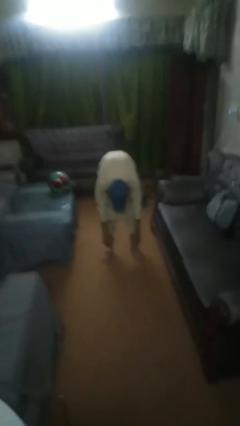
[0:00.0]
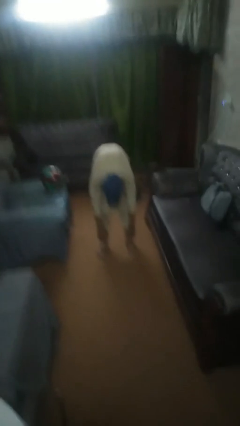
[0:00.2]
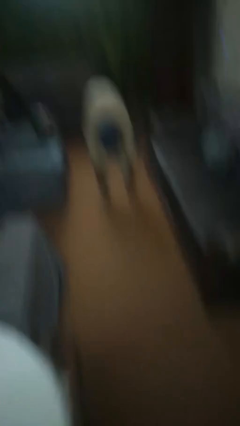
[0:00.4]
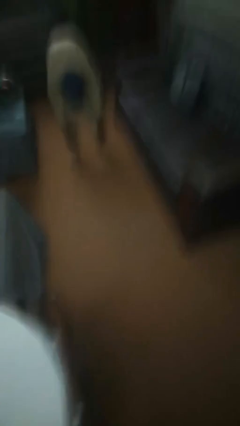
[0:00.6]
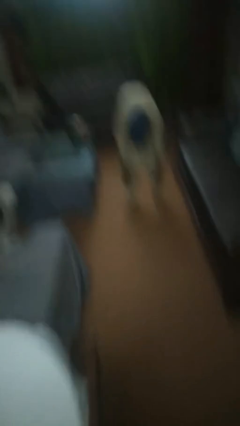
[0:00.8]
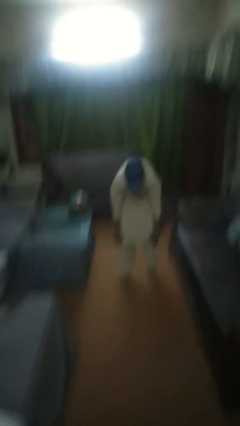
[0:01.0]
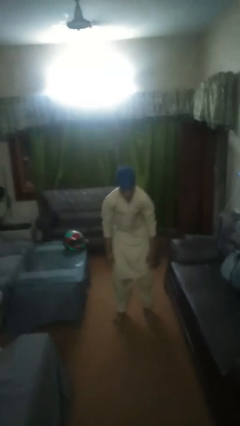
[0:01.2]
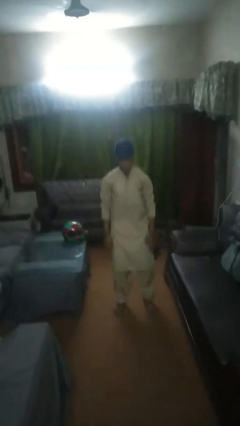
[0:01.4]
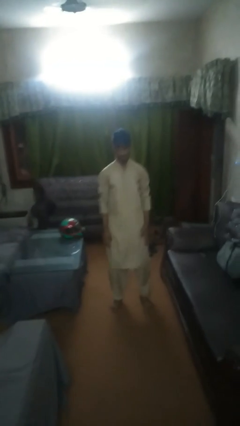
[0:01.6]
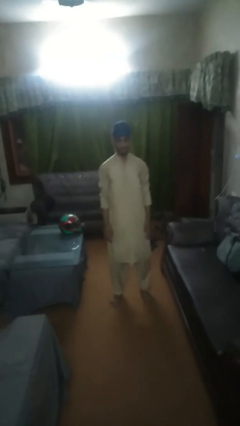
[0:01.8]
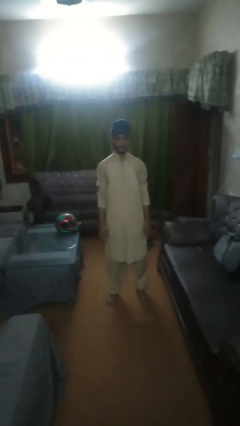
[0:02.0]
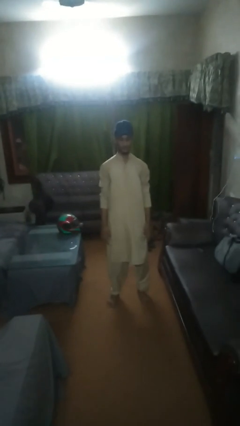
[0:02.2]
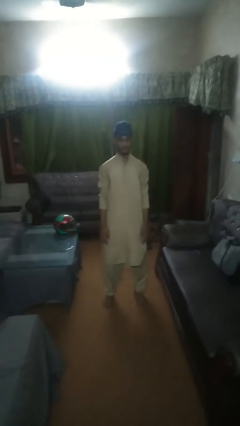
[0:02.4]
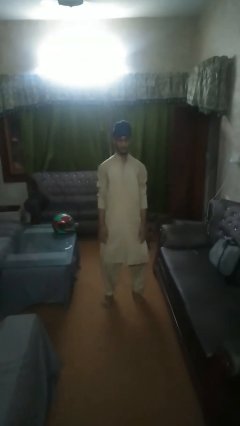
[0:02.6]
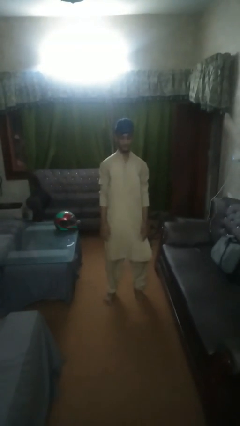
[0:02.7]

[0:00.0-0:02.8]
person stands up from floor

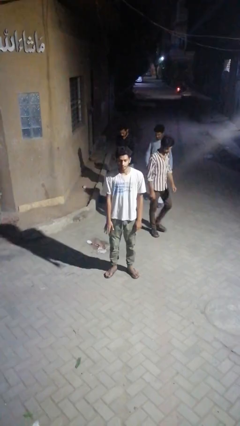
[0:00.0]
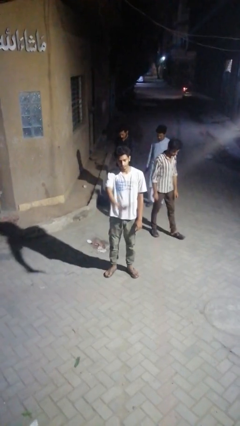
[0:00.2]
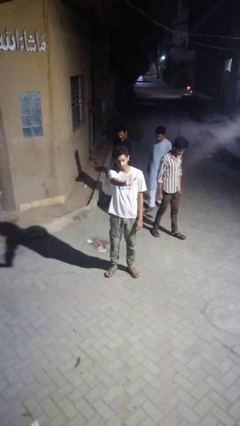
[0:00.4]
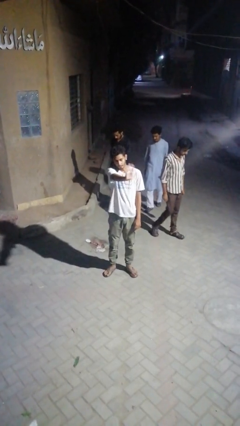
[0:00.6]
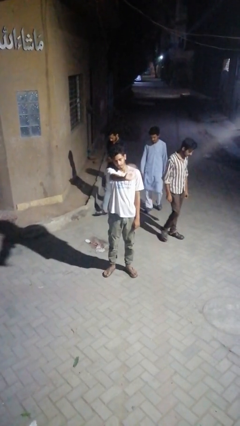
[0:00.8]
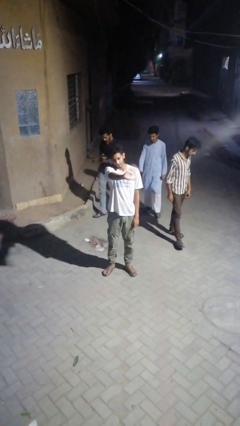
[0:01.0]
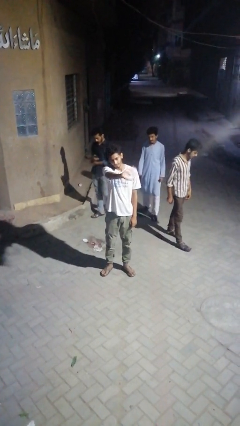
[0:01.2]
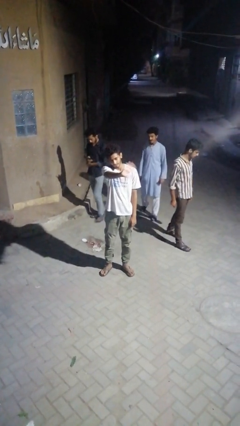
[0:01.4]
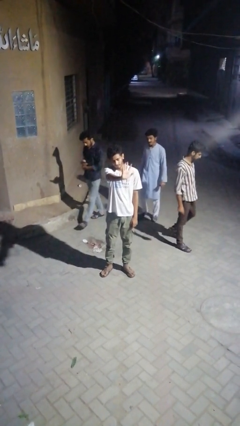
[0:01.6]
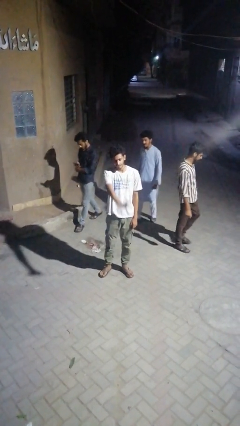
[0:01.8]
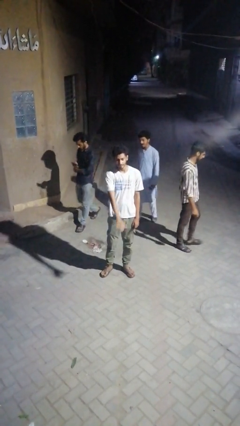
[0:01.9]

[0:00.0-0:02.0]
person waves at person

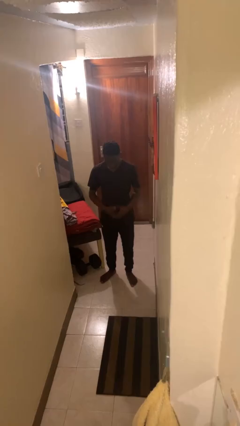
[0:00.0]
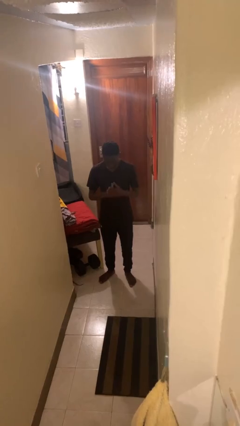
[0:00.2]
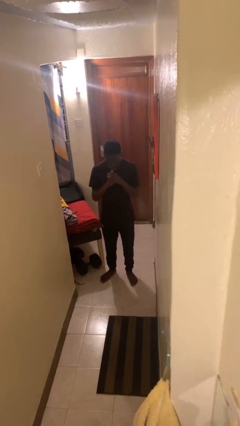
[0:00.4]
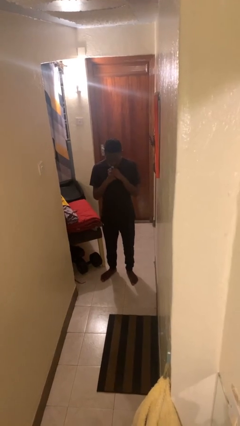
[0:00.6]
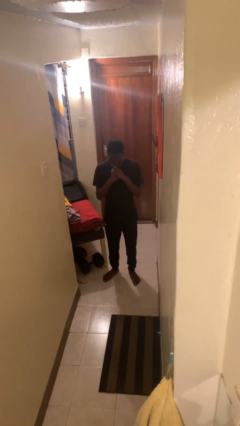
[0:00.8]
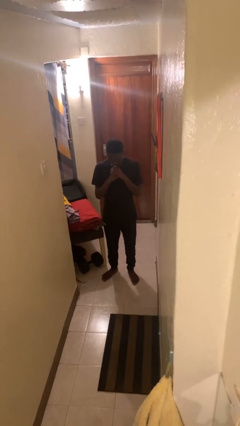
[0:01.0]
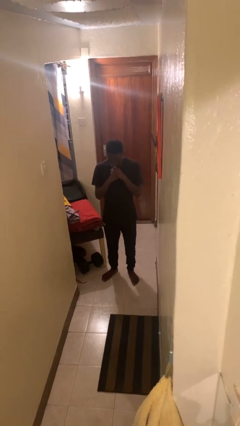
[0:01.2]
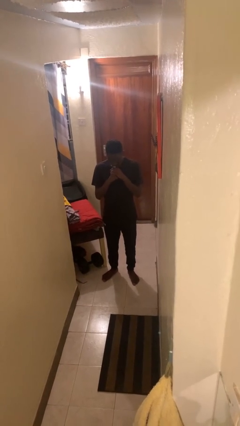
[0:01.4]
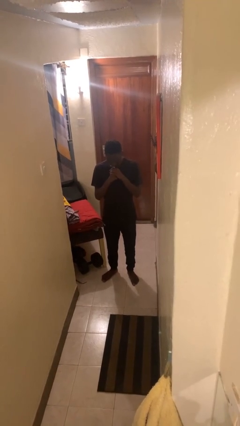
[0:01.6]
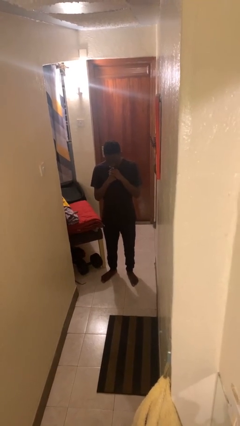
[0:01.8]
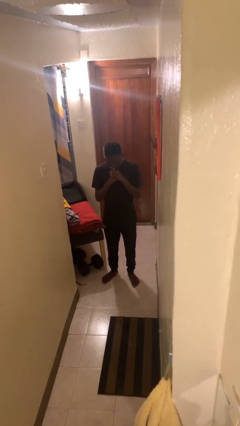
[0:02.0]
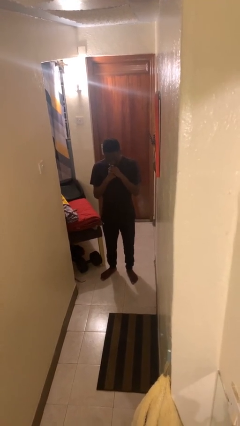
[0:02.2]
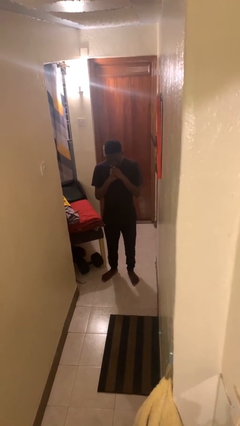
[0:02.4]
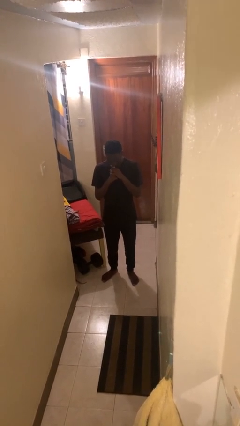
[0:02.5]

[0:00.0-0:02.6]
person vapes

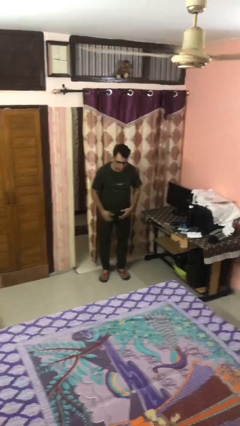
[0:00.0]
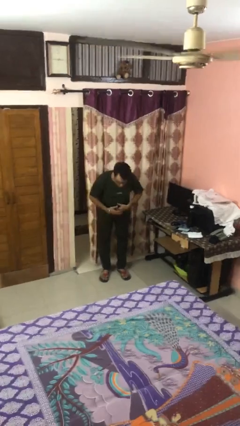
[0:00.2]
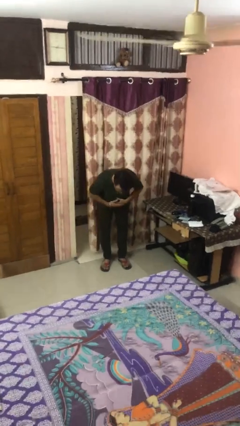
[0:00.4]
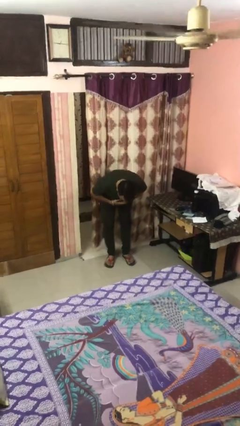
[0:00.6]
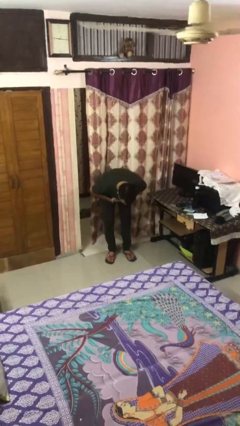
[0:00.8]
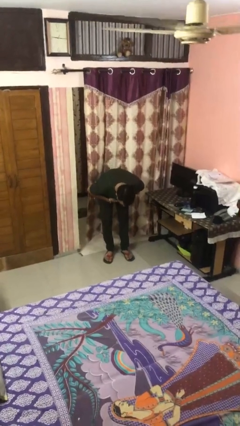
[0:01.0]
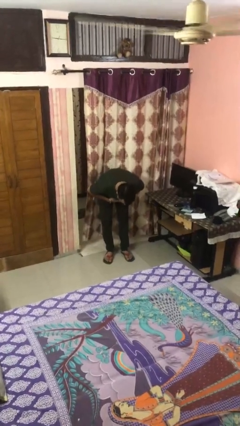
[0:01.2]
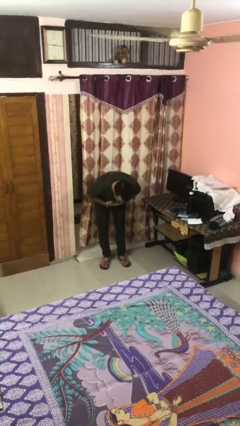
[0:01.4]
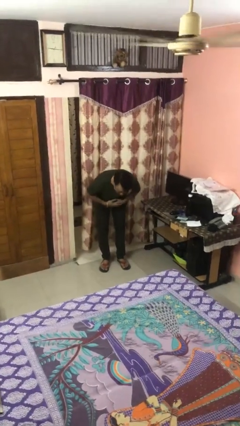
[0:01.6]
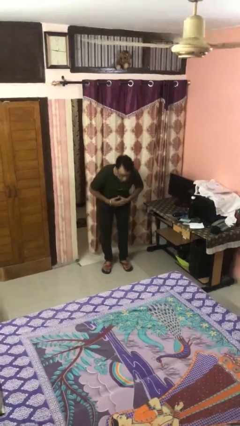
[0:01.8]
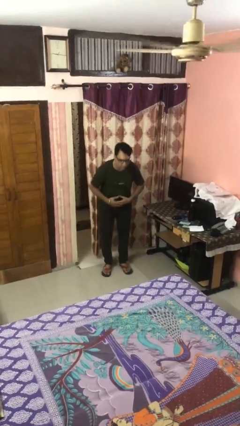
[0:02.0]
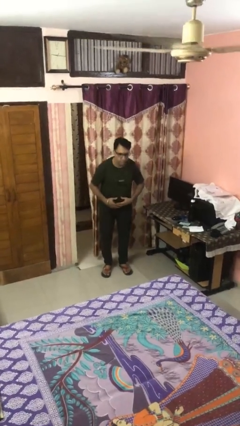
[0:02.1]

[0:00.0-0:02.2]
person bows

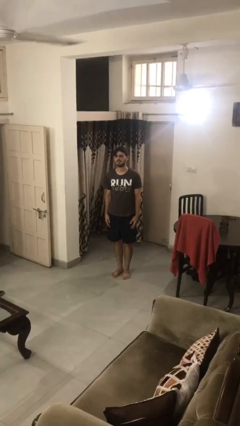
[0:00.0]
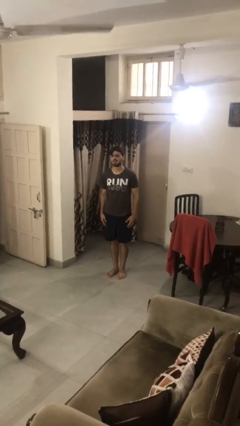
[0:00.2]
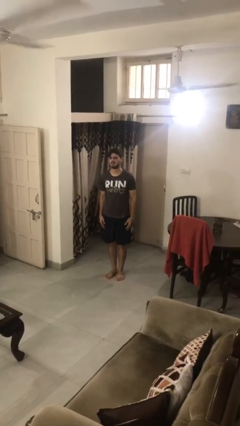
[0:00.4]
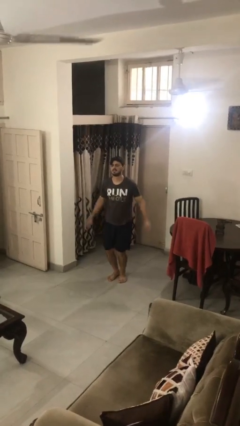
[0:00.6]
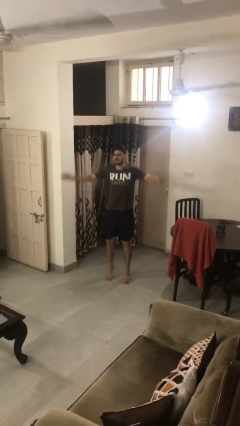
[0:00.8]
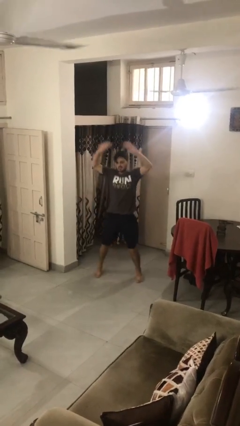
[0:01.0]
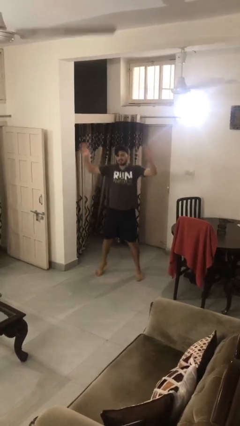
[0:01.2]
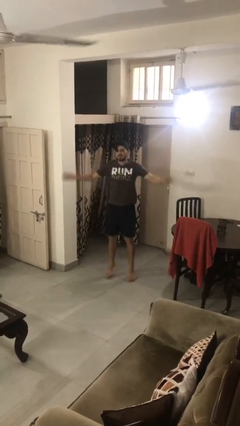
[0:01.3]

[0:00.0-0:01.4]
person exercises with jumping jacks

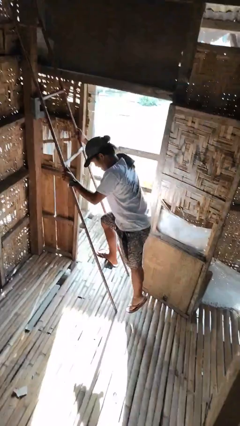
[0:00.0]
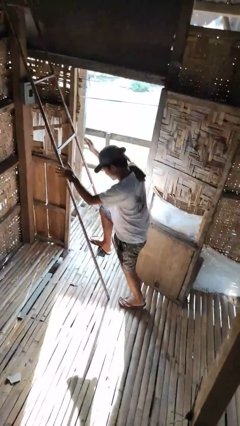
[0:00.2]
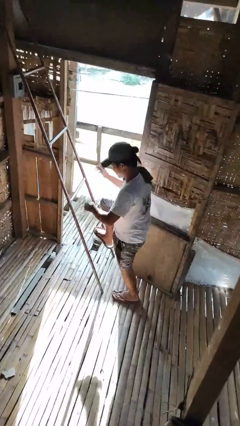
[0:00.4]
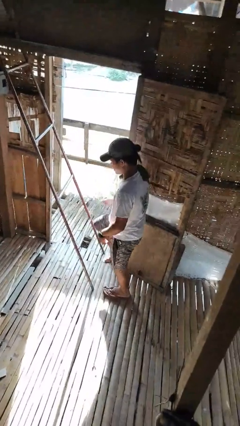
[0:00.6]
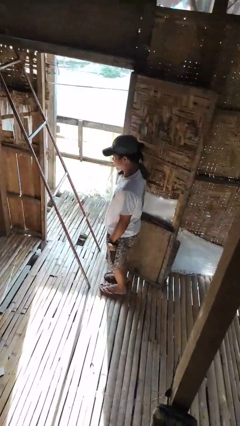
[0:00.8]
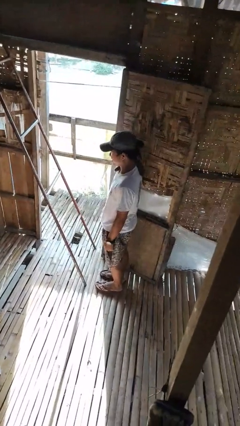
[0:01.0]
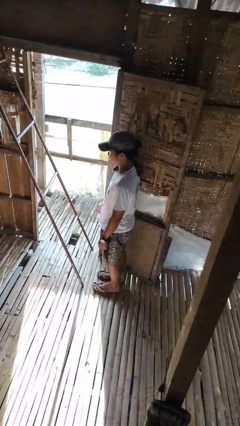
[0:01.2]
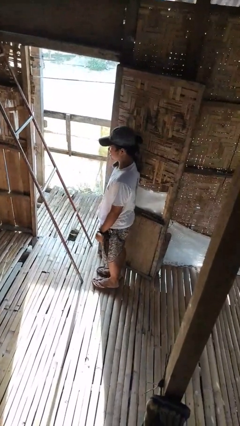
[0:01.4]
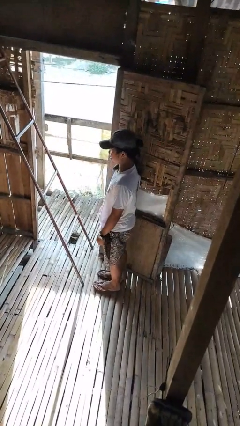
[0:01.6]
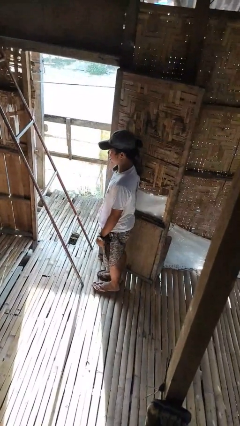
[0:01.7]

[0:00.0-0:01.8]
person climbs down ladder

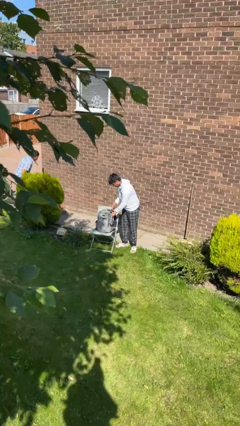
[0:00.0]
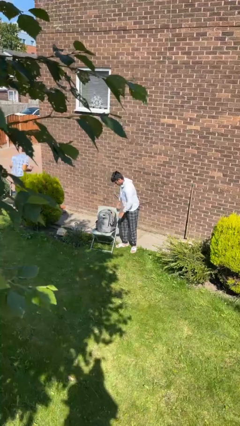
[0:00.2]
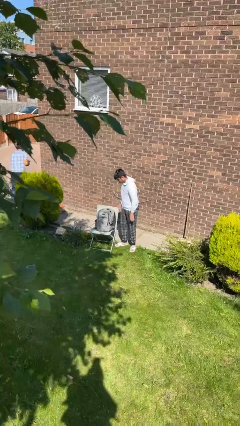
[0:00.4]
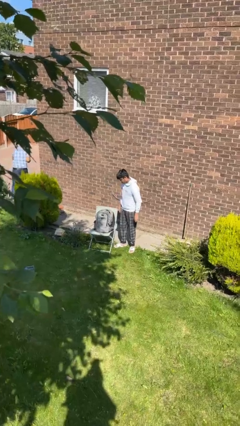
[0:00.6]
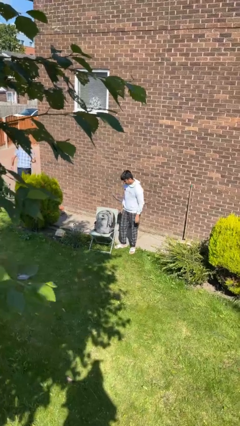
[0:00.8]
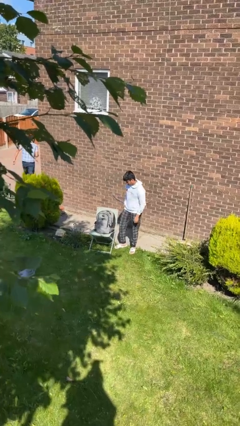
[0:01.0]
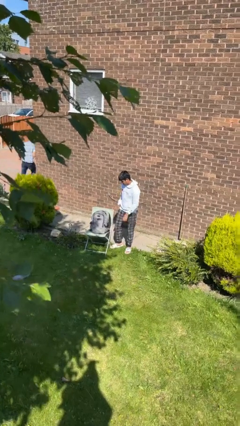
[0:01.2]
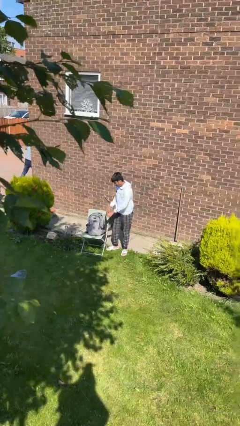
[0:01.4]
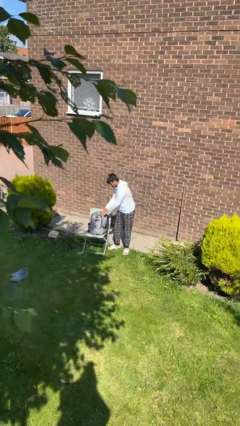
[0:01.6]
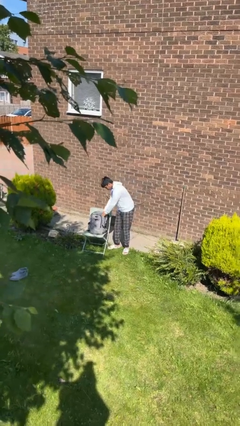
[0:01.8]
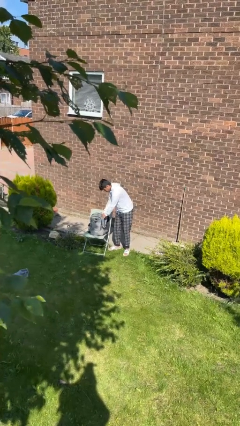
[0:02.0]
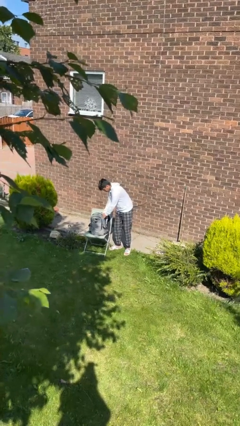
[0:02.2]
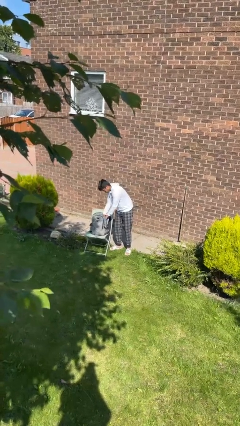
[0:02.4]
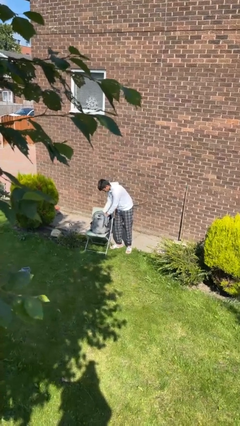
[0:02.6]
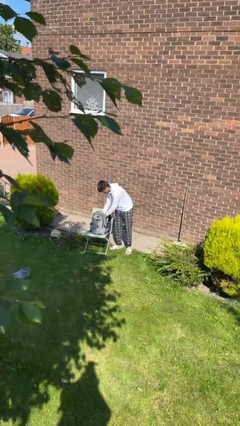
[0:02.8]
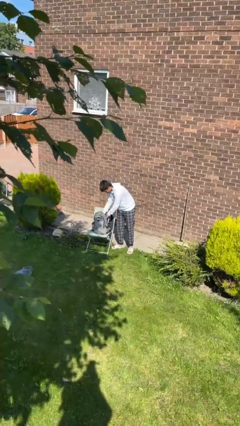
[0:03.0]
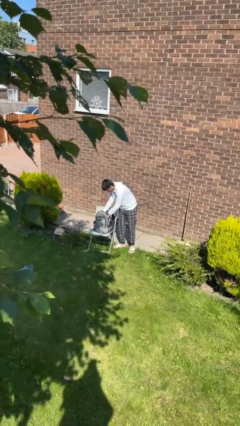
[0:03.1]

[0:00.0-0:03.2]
person searches in backpack

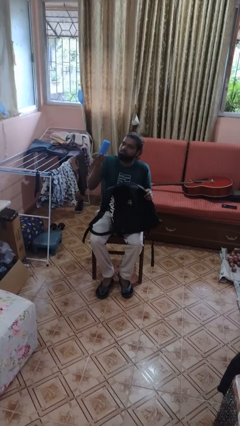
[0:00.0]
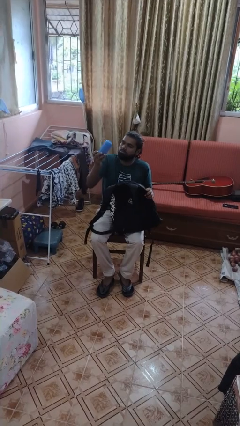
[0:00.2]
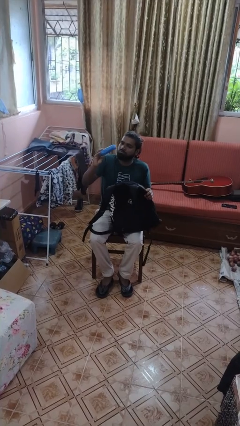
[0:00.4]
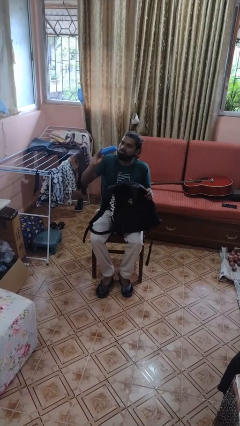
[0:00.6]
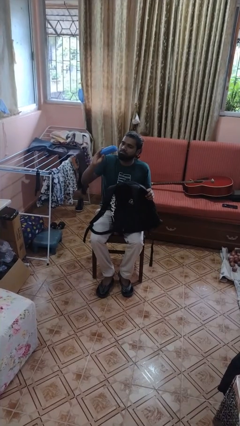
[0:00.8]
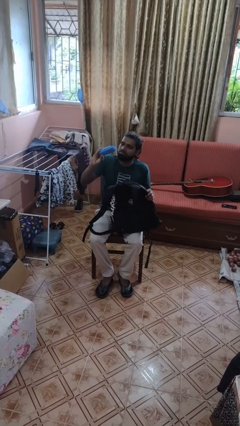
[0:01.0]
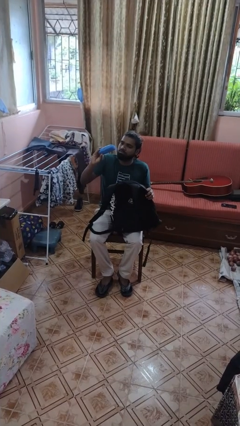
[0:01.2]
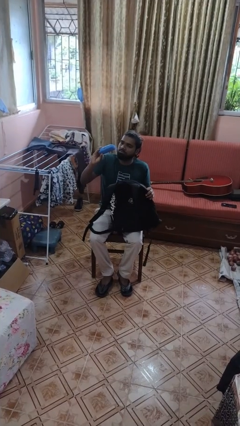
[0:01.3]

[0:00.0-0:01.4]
person takes object from backpack
